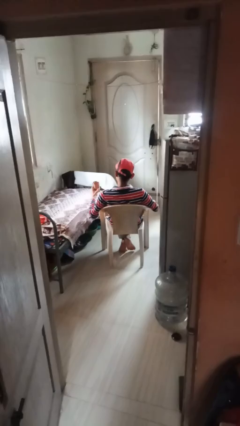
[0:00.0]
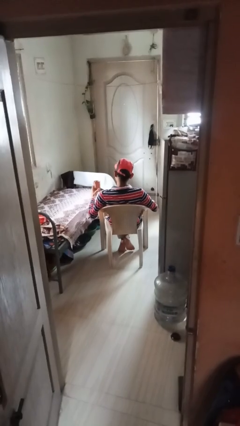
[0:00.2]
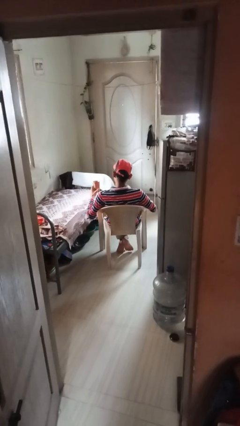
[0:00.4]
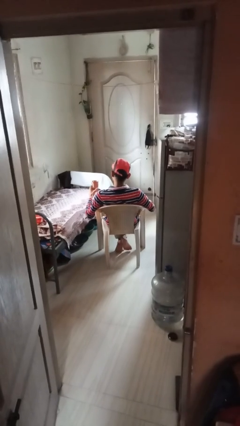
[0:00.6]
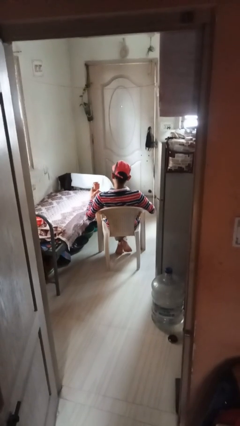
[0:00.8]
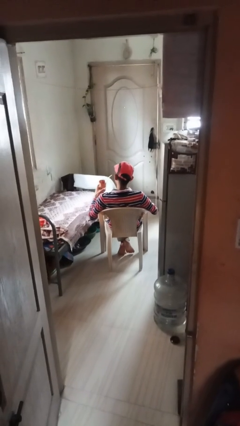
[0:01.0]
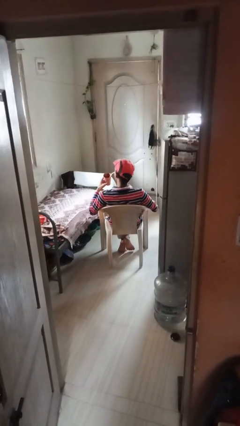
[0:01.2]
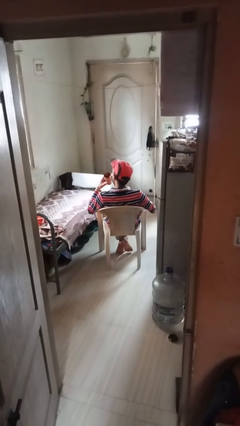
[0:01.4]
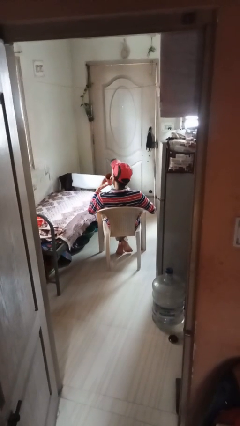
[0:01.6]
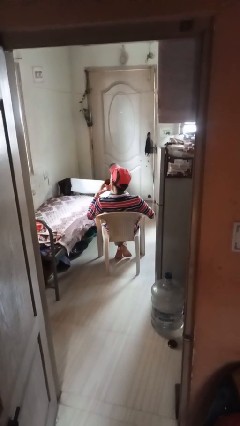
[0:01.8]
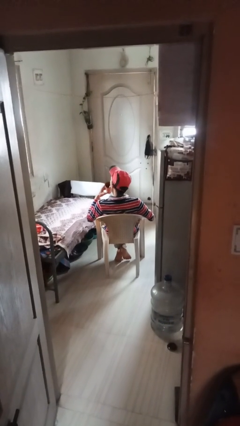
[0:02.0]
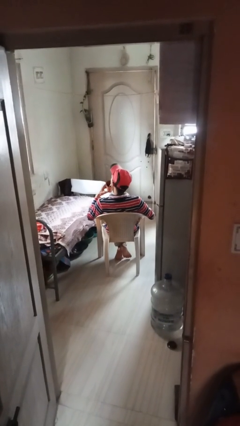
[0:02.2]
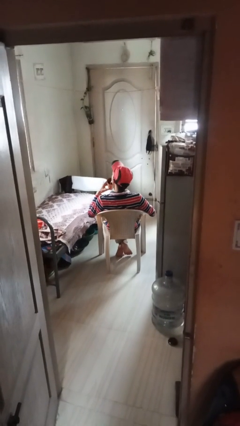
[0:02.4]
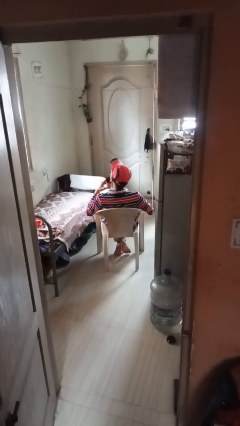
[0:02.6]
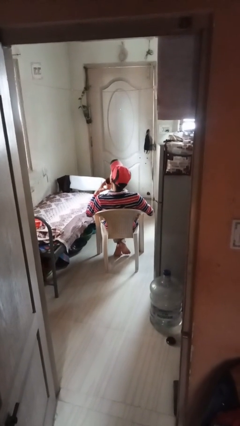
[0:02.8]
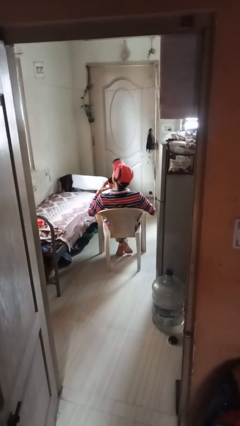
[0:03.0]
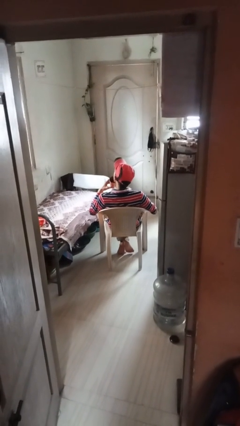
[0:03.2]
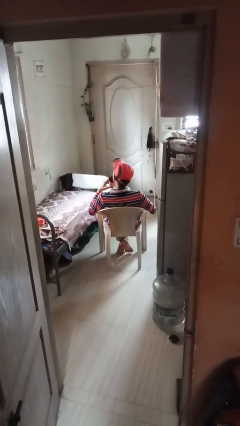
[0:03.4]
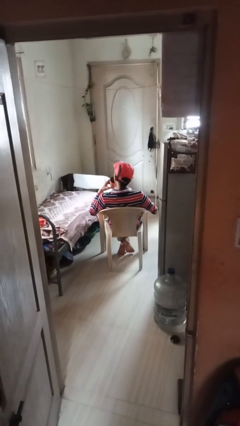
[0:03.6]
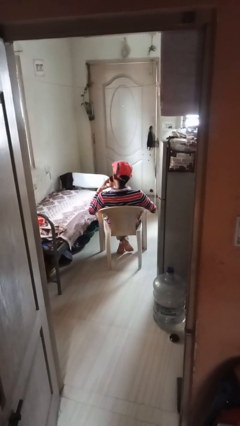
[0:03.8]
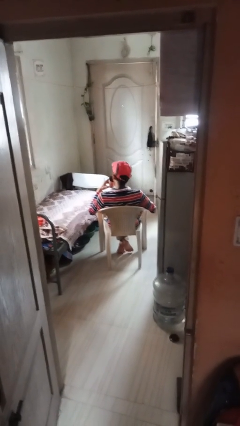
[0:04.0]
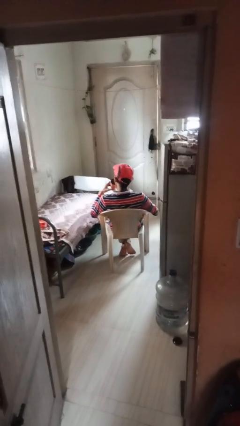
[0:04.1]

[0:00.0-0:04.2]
person drinks from straw

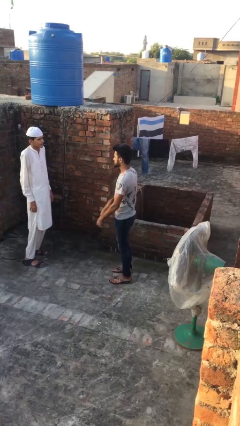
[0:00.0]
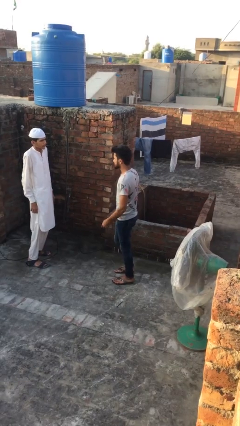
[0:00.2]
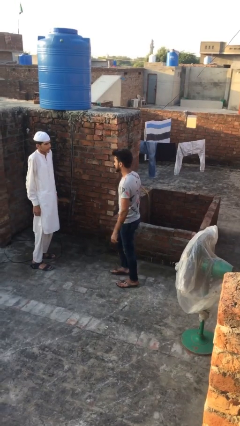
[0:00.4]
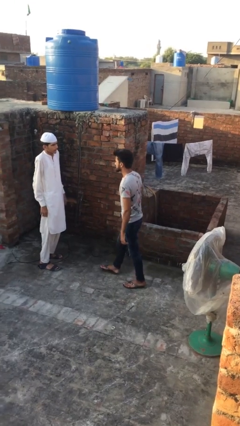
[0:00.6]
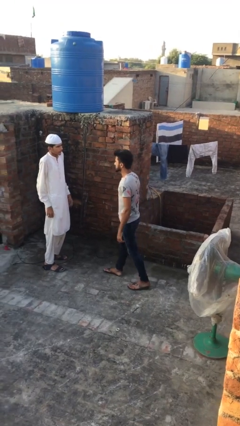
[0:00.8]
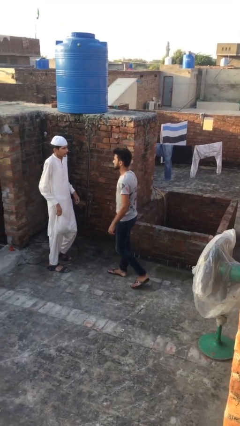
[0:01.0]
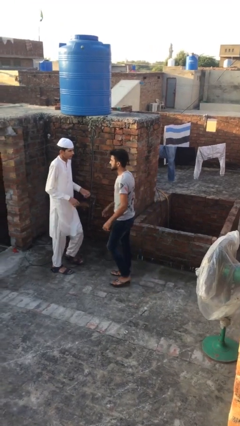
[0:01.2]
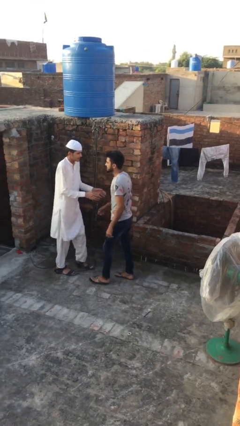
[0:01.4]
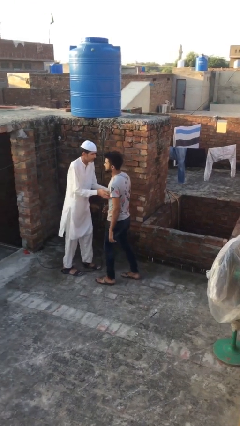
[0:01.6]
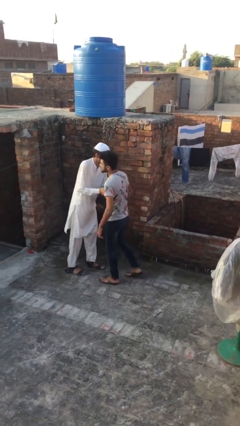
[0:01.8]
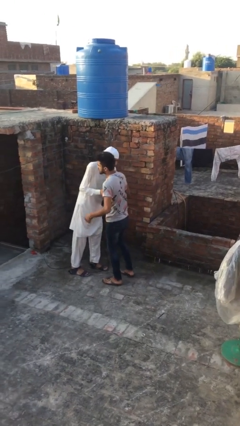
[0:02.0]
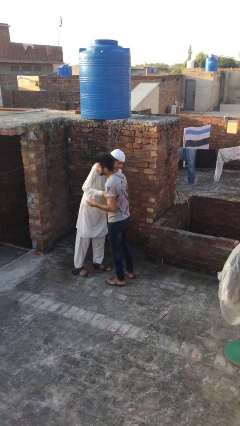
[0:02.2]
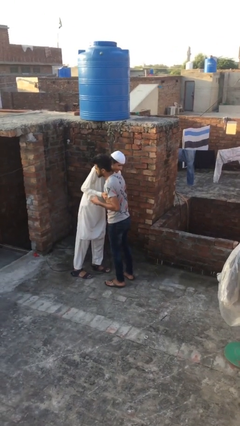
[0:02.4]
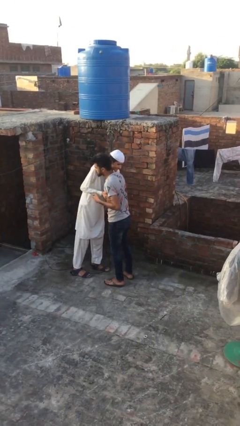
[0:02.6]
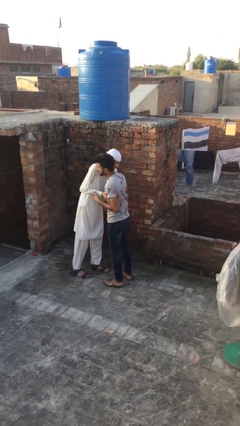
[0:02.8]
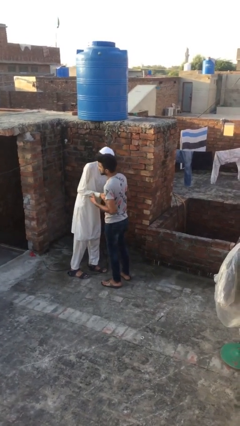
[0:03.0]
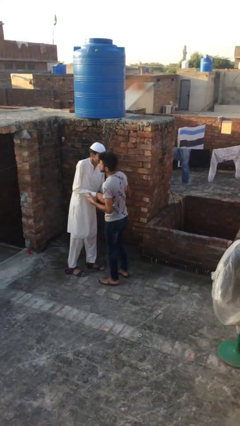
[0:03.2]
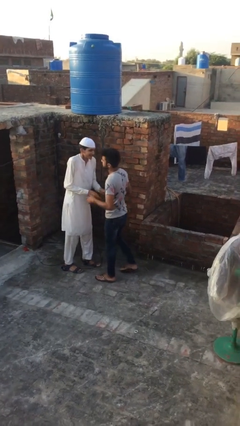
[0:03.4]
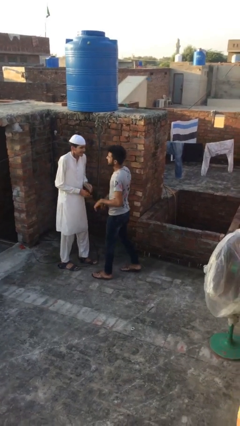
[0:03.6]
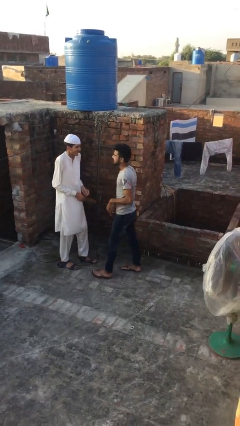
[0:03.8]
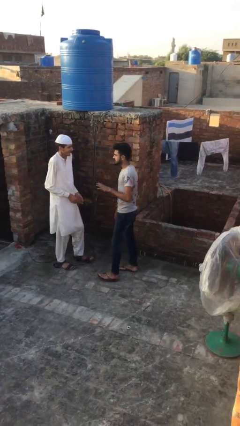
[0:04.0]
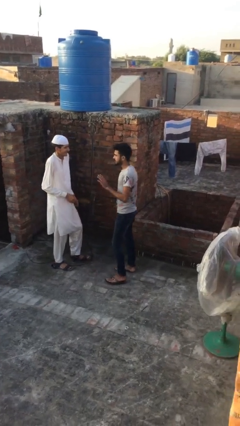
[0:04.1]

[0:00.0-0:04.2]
person embraces person

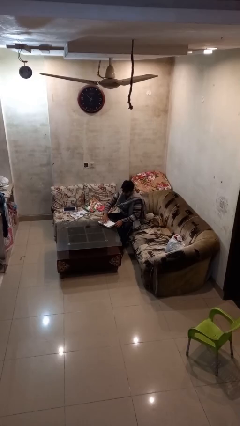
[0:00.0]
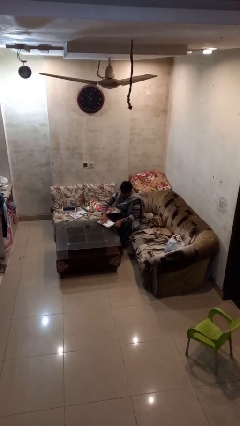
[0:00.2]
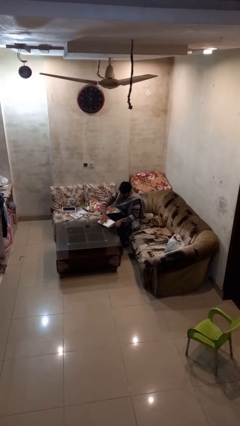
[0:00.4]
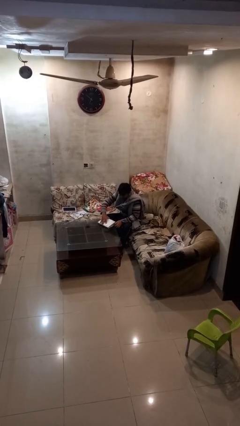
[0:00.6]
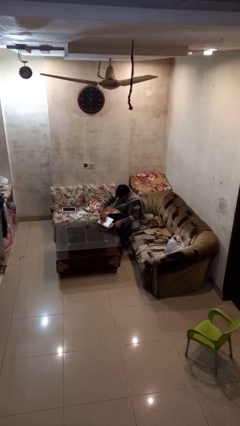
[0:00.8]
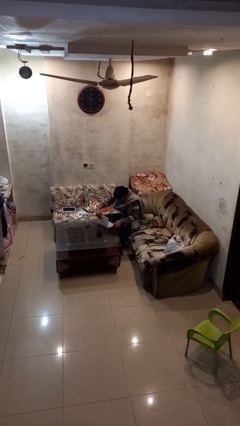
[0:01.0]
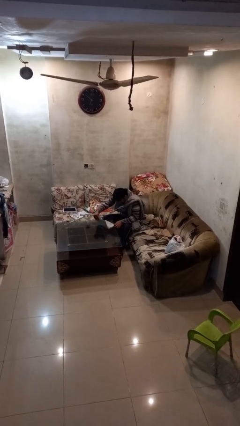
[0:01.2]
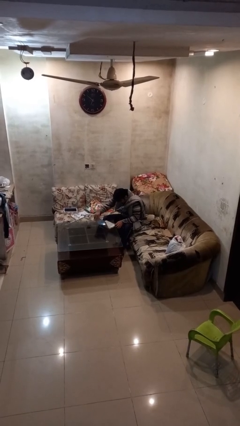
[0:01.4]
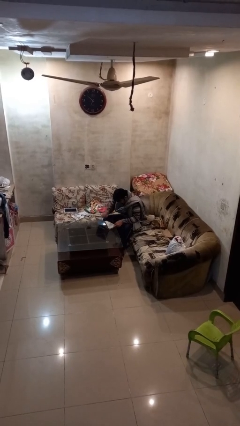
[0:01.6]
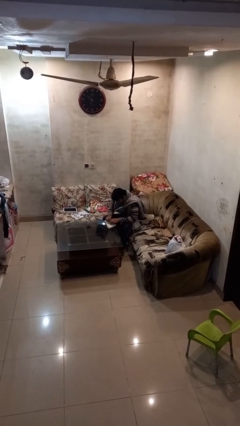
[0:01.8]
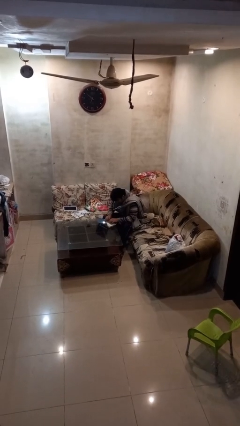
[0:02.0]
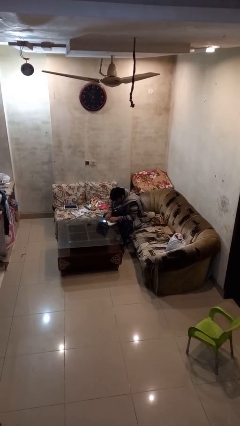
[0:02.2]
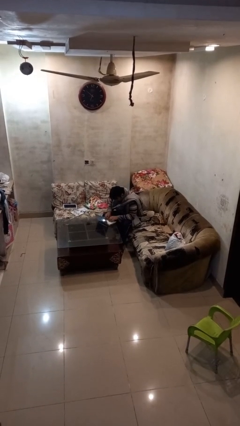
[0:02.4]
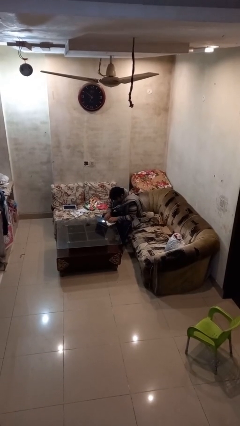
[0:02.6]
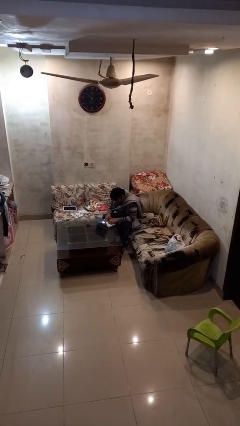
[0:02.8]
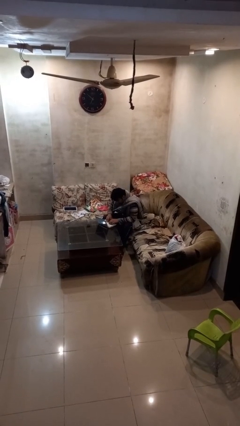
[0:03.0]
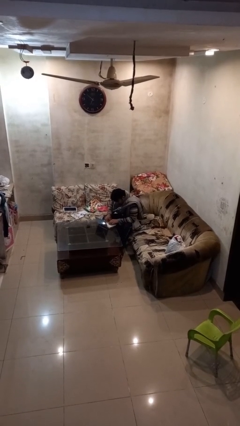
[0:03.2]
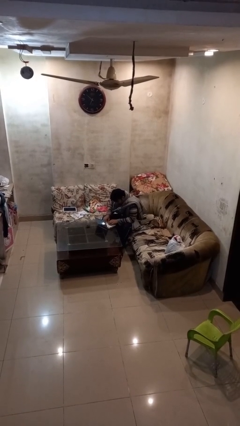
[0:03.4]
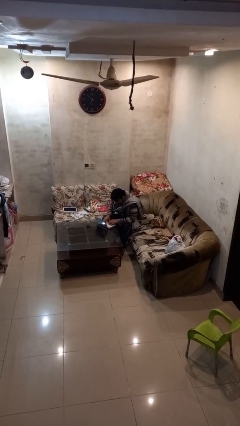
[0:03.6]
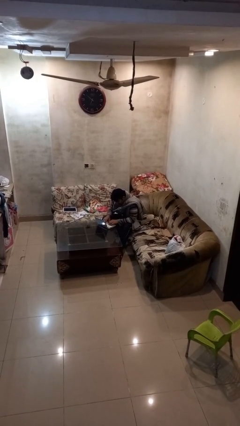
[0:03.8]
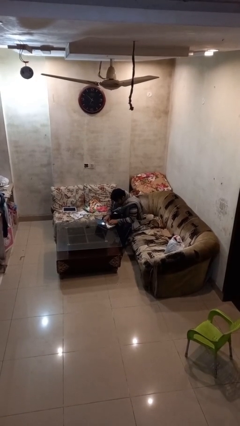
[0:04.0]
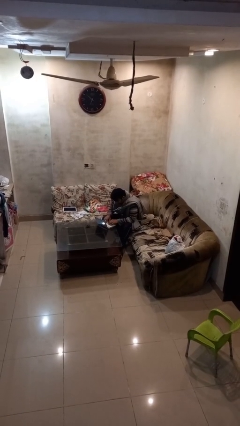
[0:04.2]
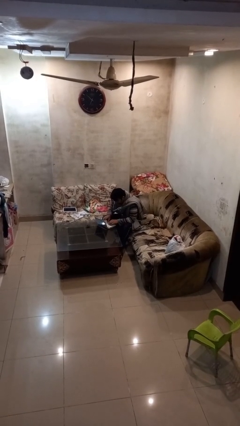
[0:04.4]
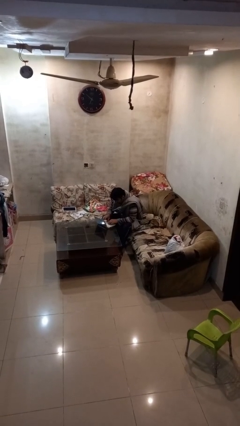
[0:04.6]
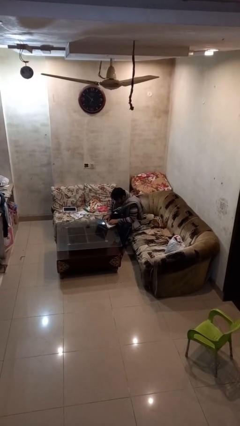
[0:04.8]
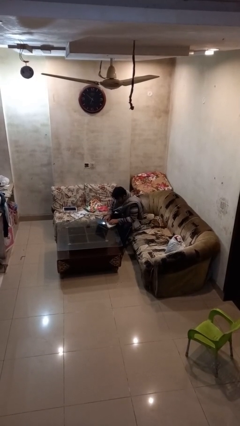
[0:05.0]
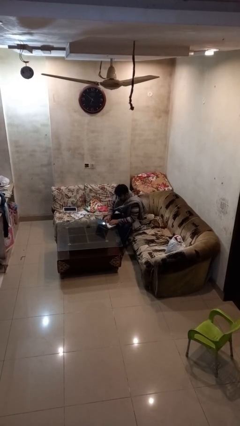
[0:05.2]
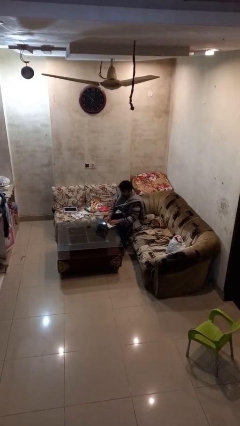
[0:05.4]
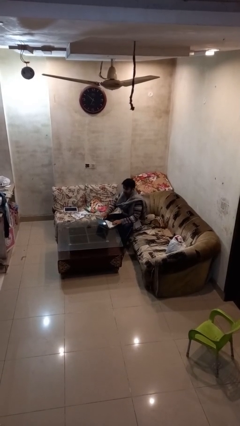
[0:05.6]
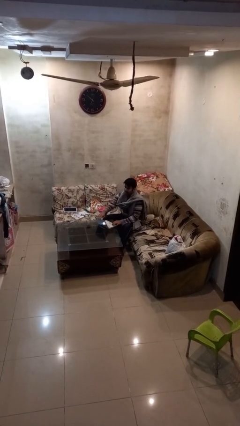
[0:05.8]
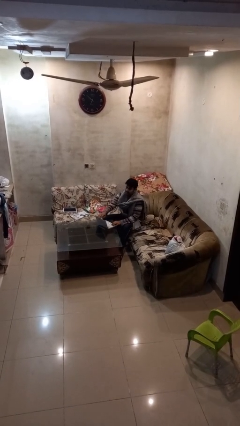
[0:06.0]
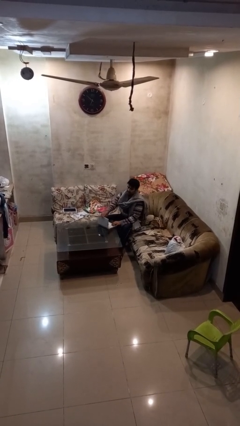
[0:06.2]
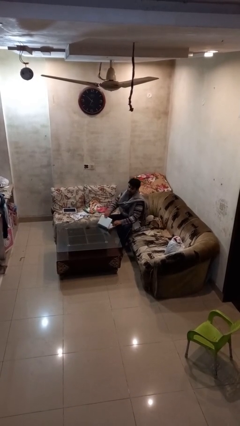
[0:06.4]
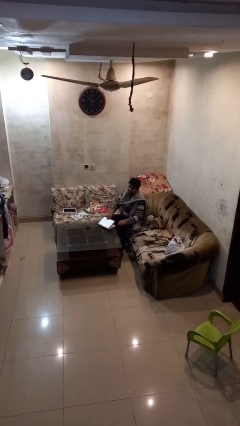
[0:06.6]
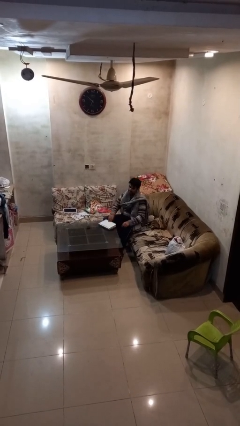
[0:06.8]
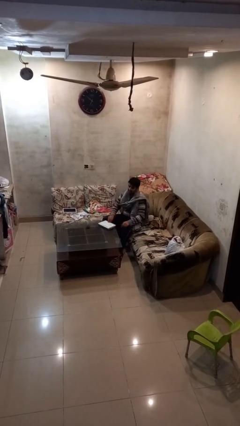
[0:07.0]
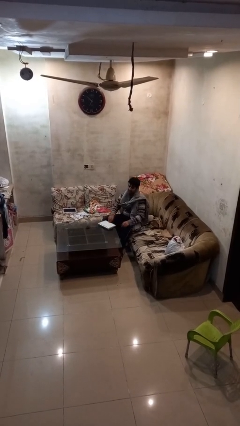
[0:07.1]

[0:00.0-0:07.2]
person interacts with laptop

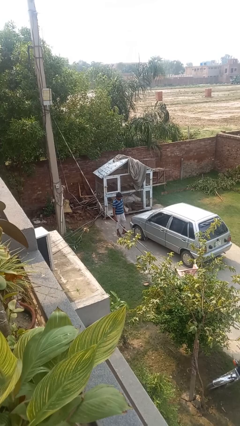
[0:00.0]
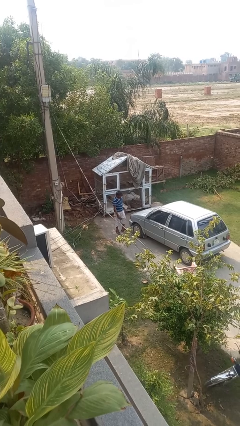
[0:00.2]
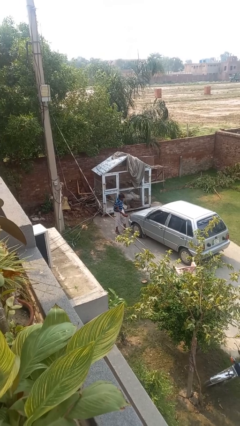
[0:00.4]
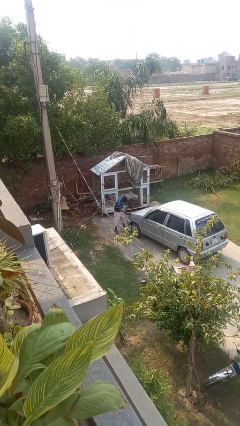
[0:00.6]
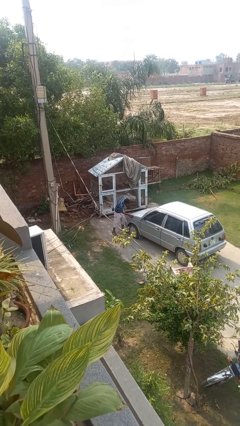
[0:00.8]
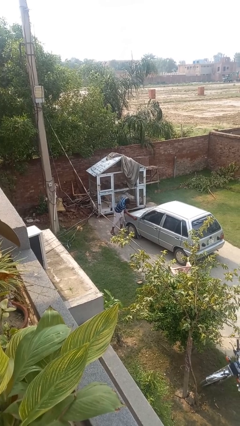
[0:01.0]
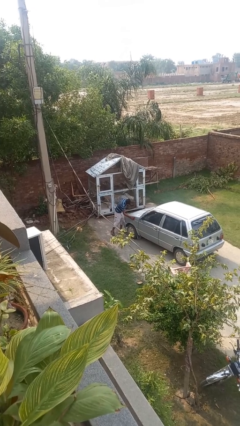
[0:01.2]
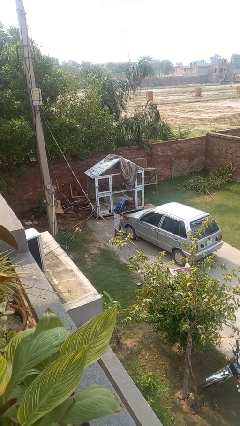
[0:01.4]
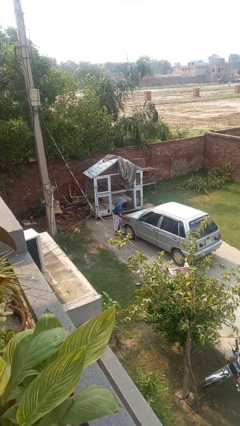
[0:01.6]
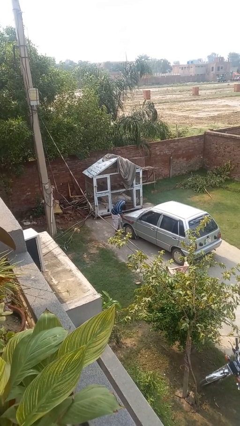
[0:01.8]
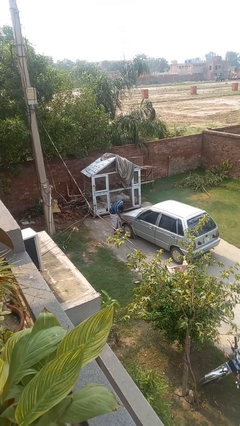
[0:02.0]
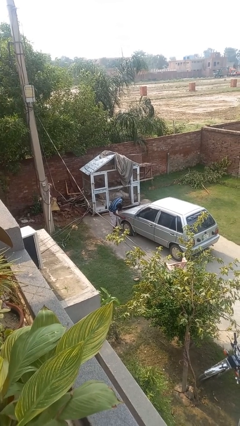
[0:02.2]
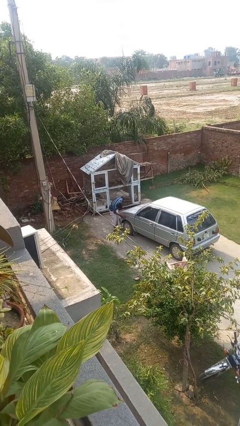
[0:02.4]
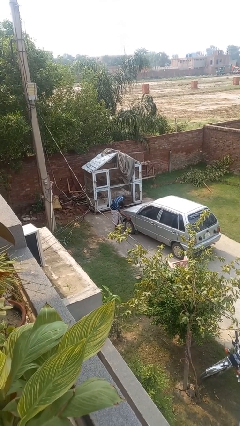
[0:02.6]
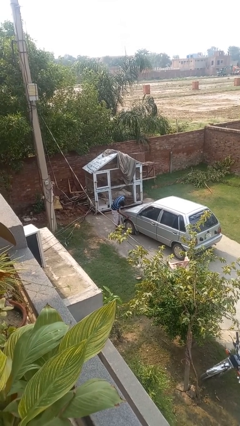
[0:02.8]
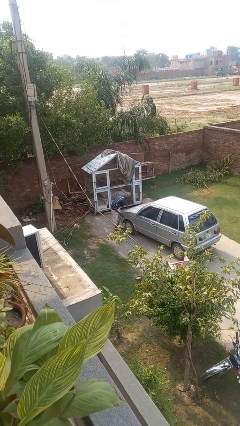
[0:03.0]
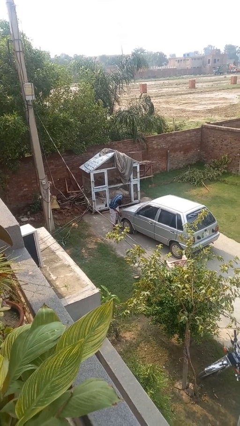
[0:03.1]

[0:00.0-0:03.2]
person polishes car with rag
